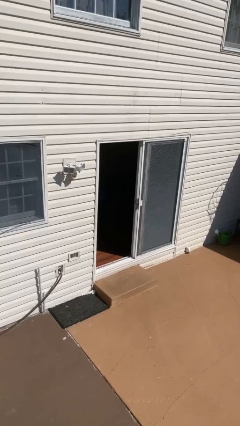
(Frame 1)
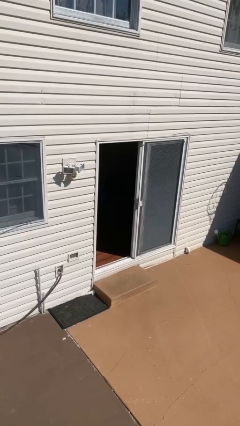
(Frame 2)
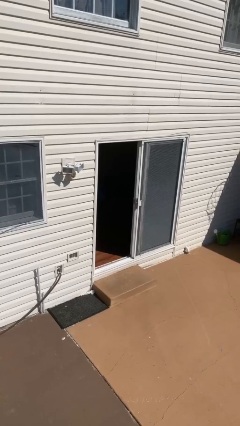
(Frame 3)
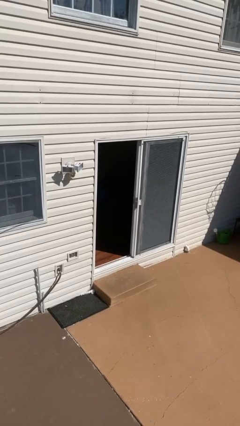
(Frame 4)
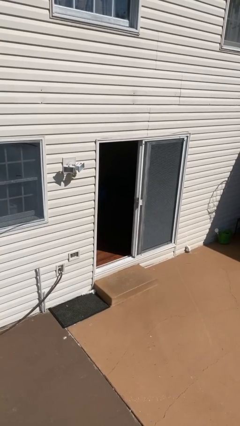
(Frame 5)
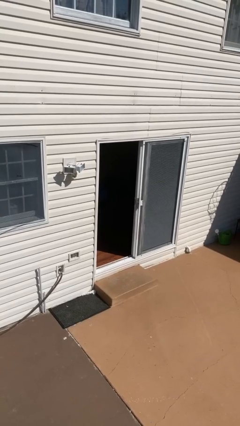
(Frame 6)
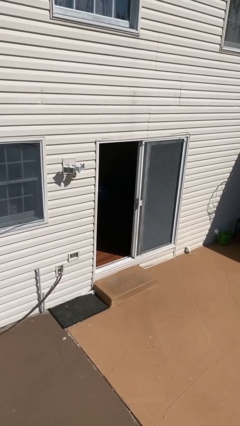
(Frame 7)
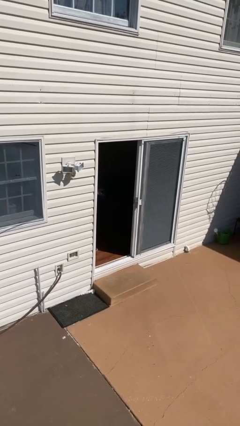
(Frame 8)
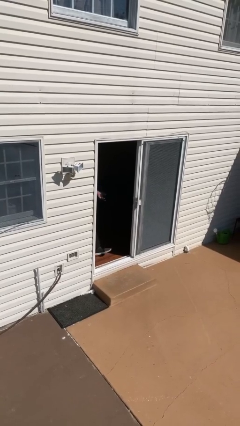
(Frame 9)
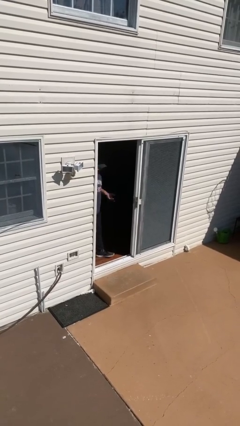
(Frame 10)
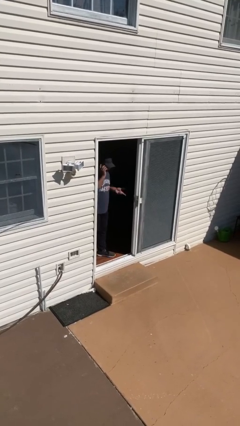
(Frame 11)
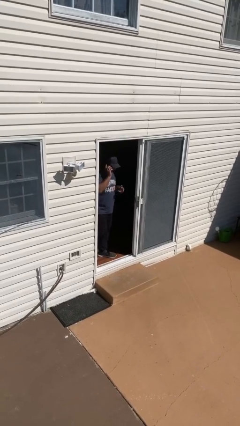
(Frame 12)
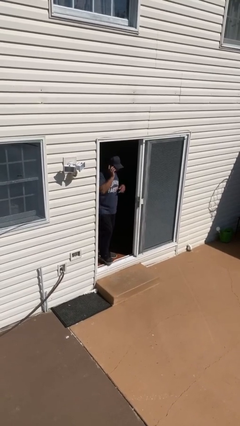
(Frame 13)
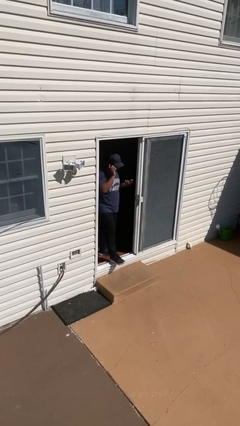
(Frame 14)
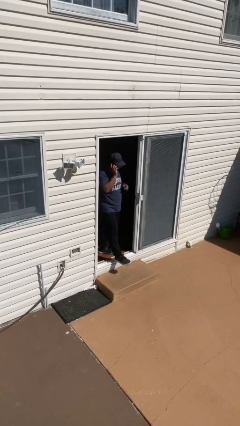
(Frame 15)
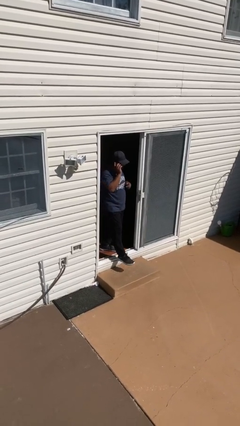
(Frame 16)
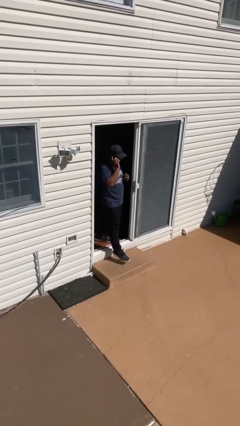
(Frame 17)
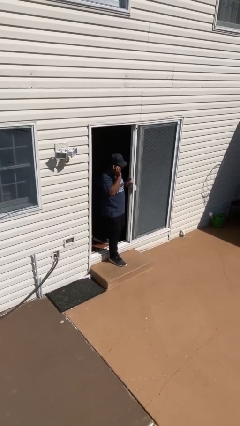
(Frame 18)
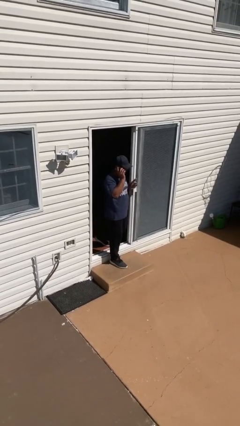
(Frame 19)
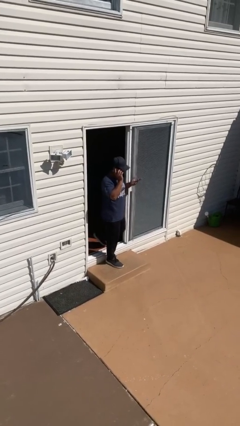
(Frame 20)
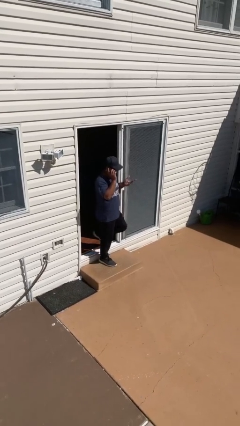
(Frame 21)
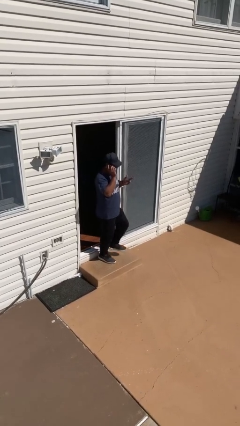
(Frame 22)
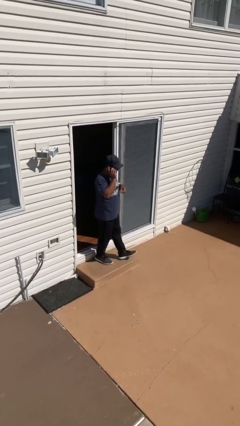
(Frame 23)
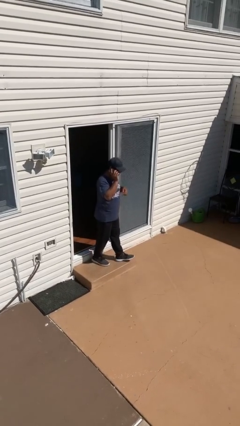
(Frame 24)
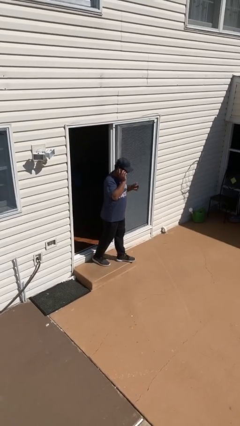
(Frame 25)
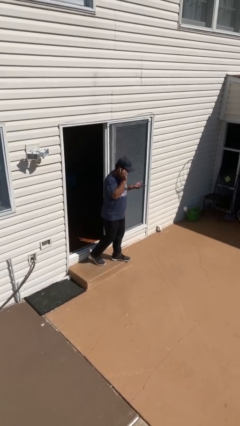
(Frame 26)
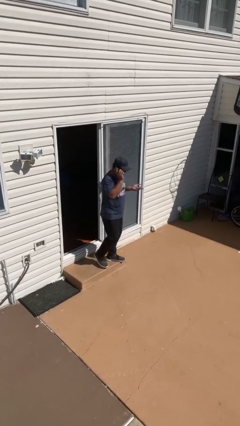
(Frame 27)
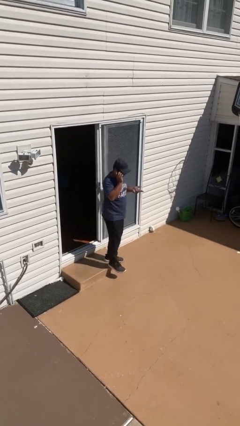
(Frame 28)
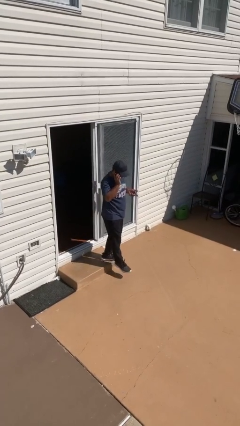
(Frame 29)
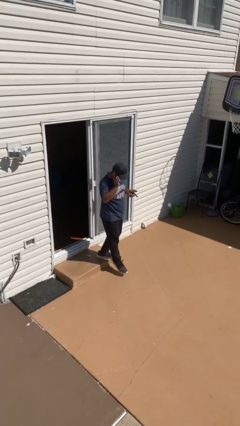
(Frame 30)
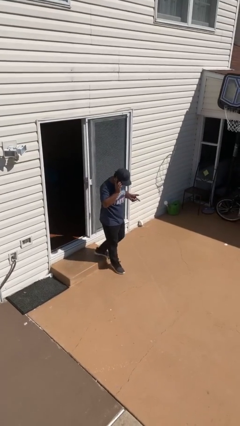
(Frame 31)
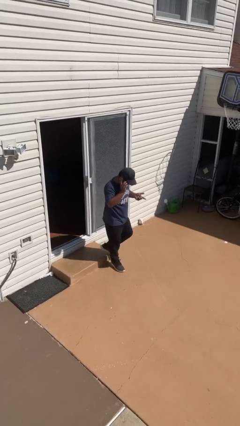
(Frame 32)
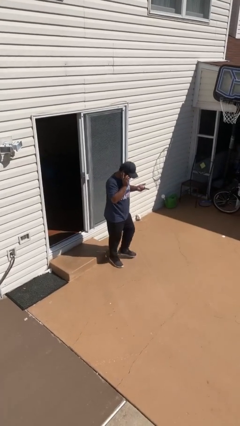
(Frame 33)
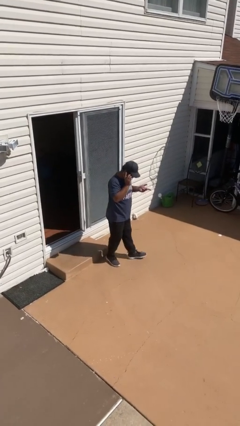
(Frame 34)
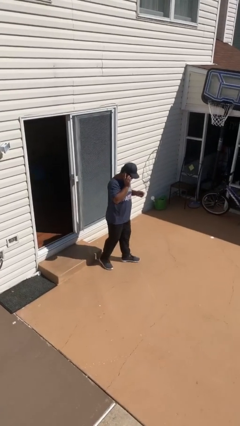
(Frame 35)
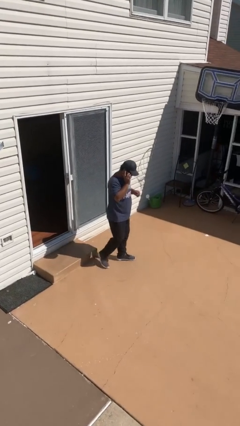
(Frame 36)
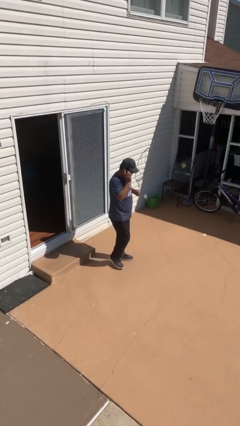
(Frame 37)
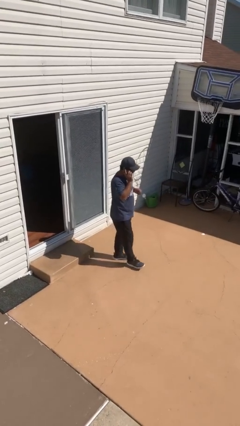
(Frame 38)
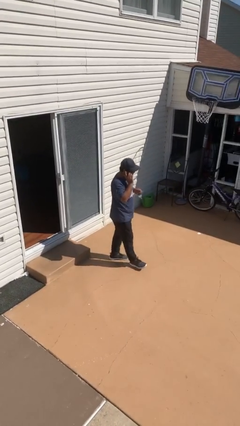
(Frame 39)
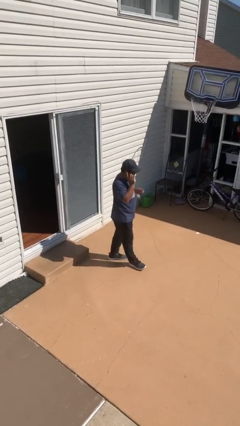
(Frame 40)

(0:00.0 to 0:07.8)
person enters scene through structure

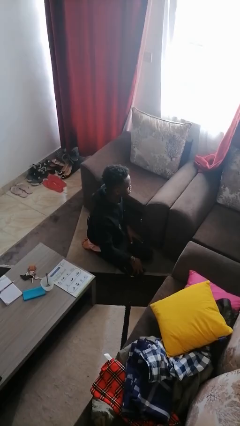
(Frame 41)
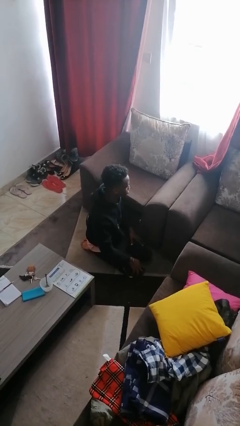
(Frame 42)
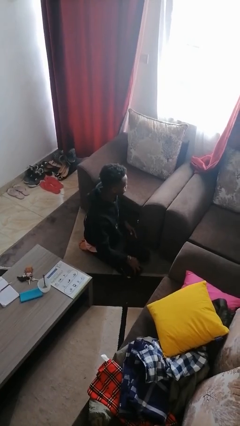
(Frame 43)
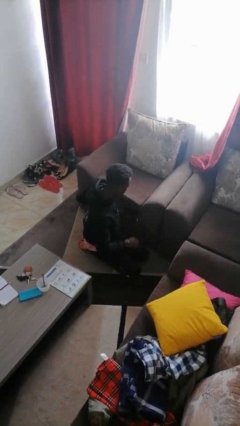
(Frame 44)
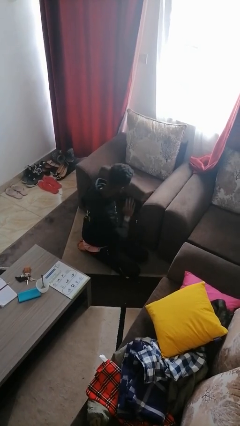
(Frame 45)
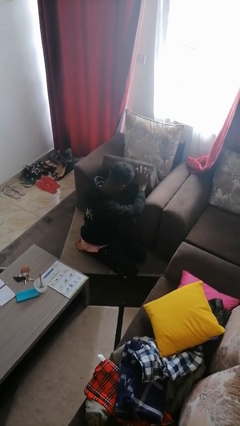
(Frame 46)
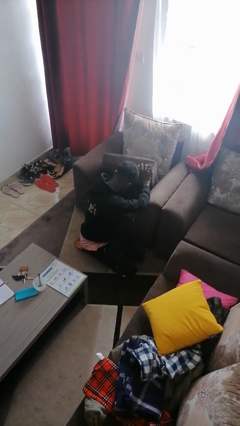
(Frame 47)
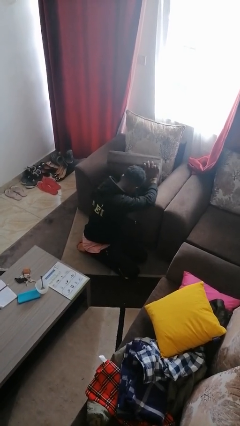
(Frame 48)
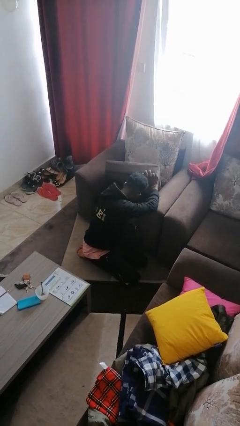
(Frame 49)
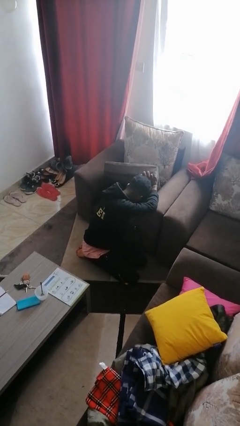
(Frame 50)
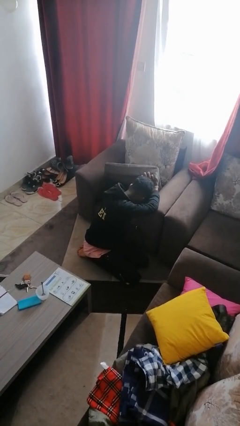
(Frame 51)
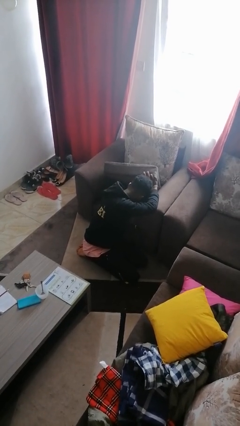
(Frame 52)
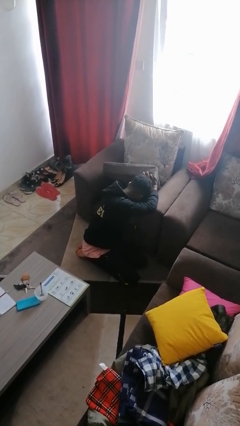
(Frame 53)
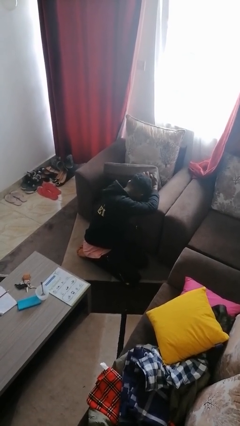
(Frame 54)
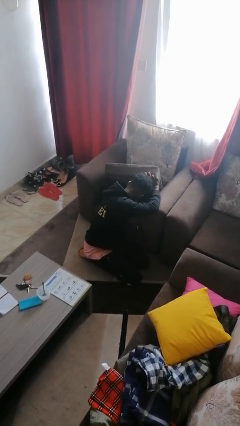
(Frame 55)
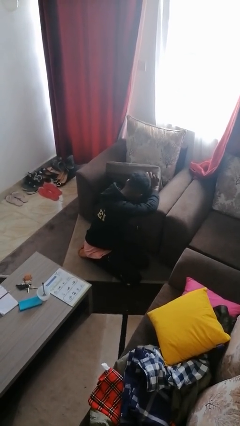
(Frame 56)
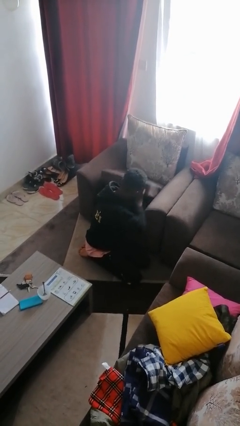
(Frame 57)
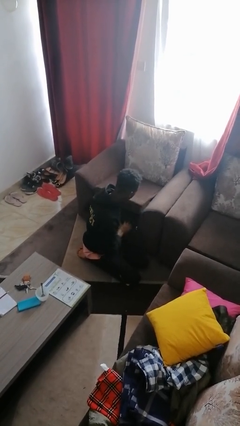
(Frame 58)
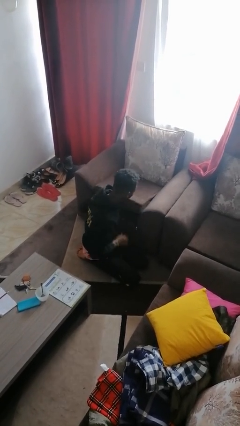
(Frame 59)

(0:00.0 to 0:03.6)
person searches in couch

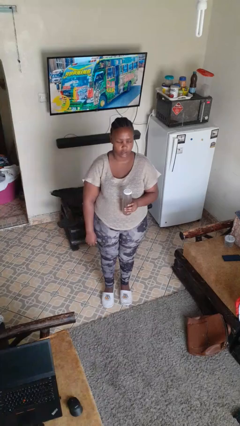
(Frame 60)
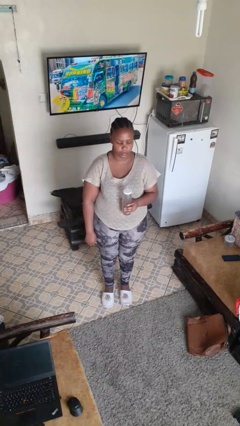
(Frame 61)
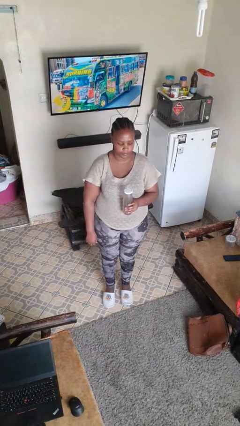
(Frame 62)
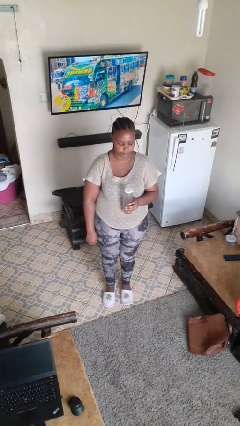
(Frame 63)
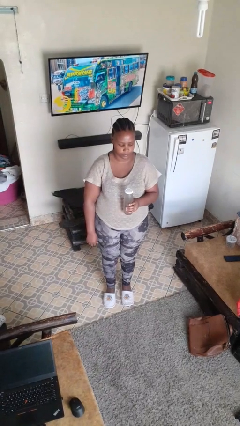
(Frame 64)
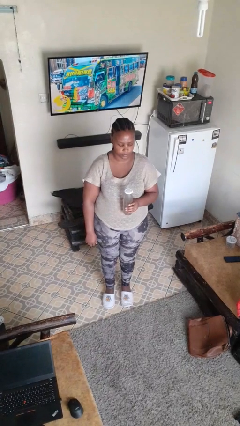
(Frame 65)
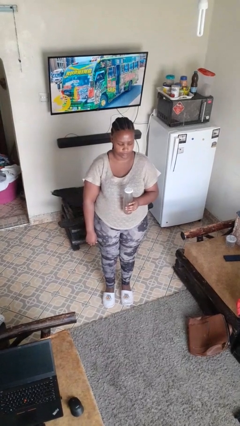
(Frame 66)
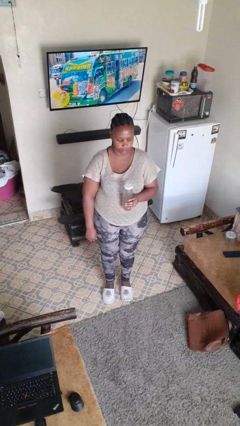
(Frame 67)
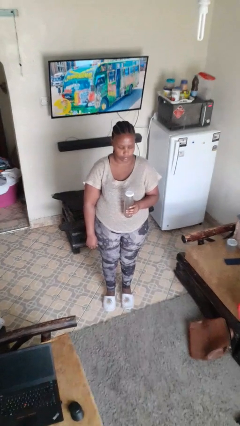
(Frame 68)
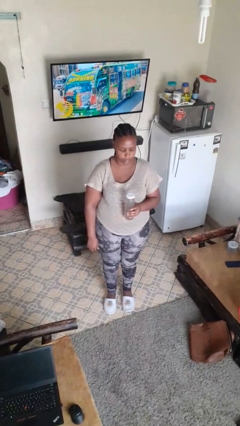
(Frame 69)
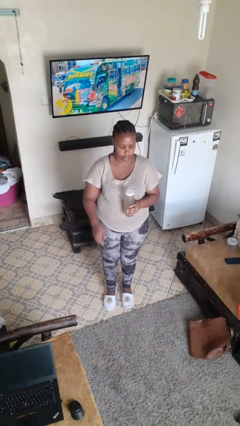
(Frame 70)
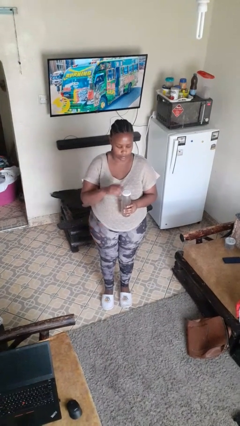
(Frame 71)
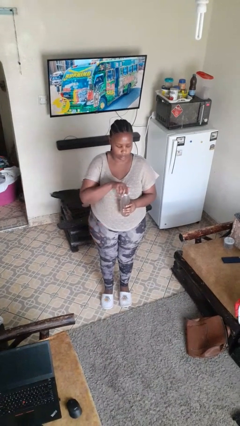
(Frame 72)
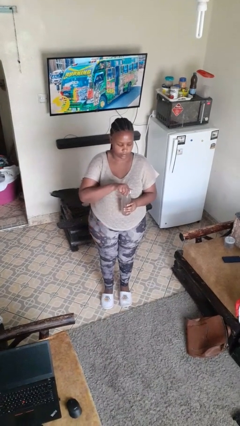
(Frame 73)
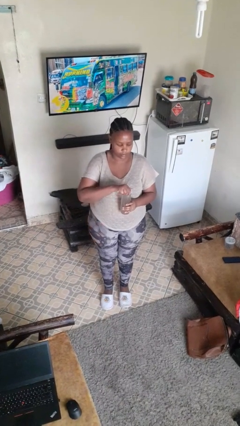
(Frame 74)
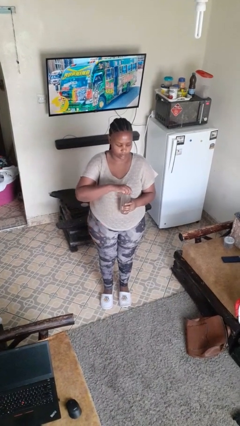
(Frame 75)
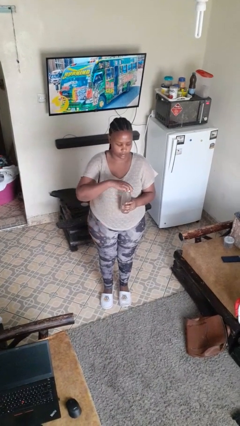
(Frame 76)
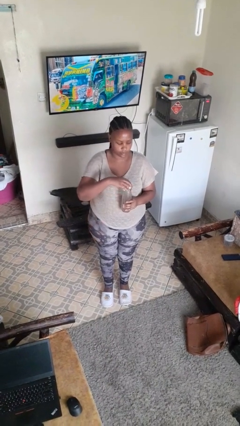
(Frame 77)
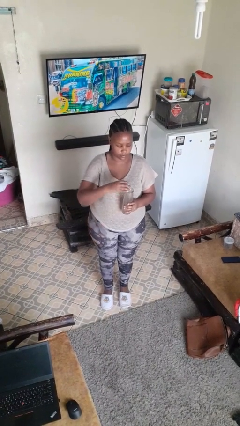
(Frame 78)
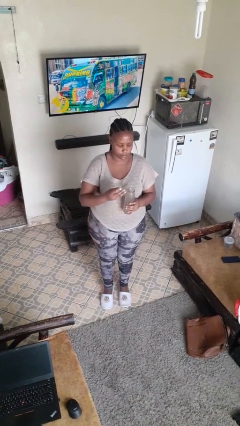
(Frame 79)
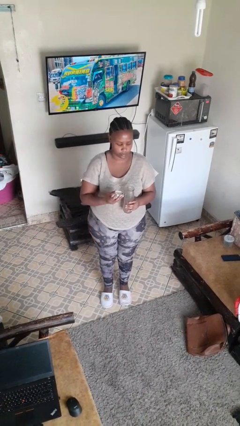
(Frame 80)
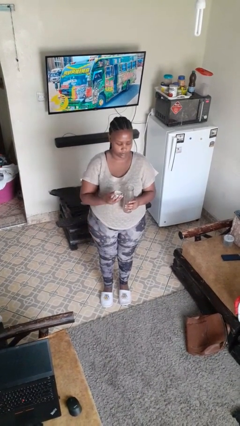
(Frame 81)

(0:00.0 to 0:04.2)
person unscrews lid from bottle

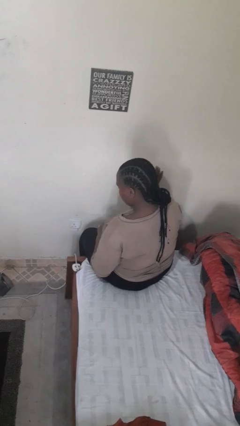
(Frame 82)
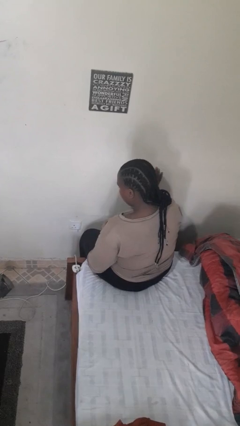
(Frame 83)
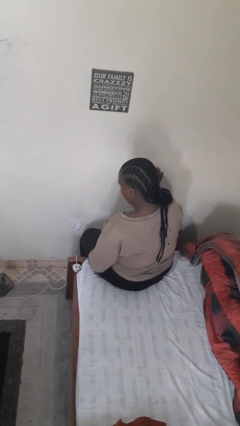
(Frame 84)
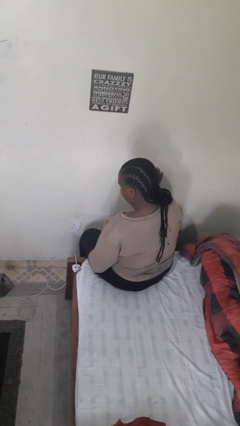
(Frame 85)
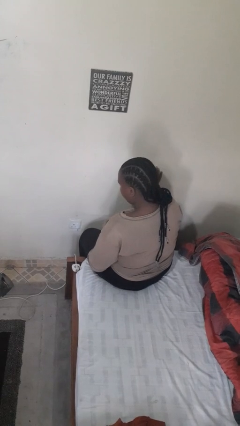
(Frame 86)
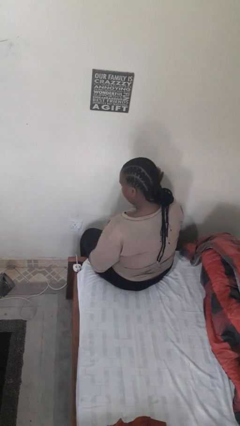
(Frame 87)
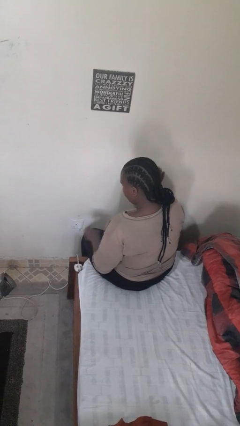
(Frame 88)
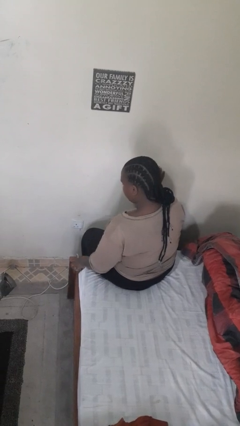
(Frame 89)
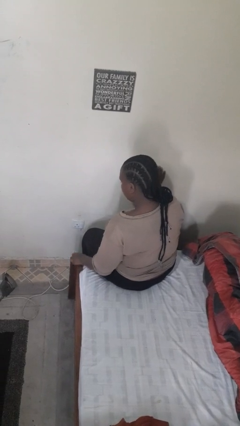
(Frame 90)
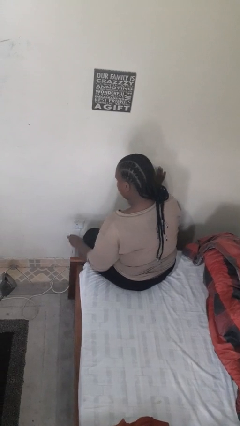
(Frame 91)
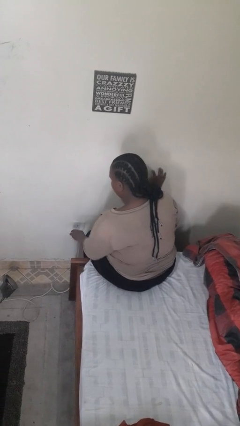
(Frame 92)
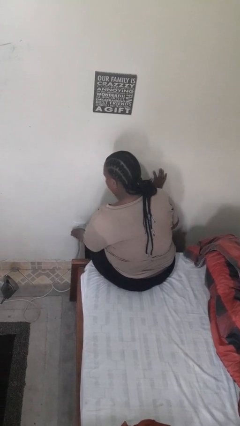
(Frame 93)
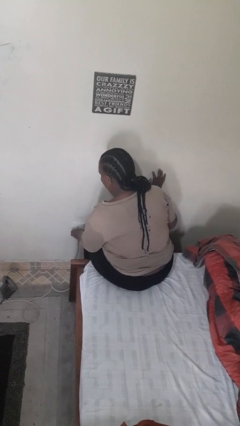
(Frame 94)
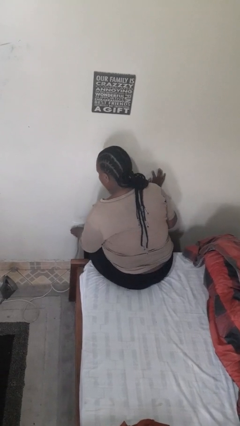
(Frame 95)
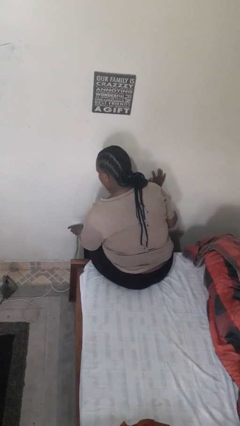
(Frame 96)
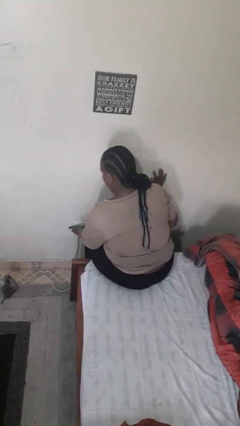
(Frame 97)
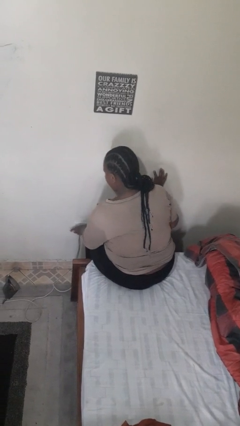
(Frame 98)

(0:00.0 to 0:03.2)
person plugs into electrical socket
